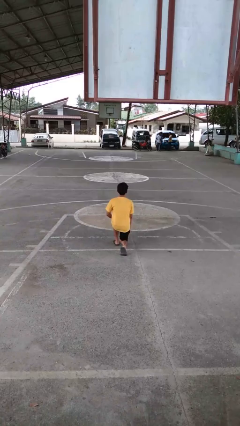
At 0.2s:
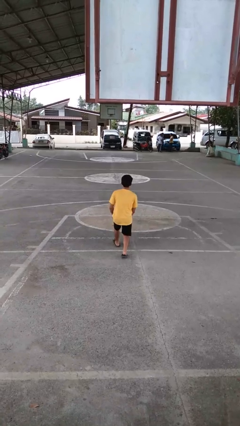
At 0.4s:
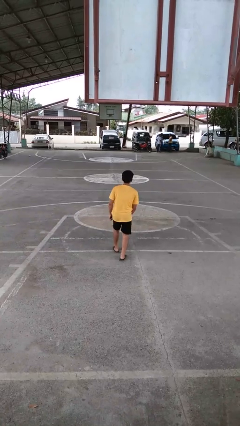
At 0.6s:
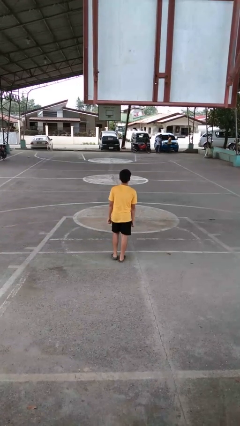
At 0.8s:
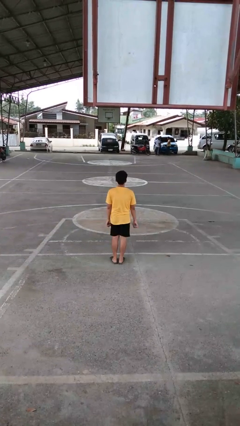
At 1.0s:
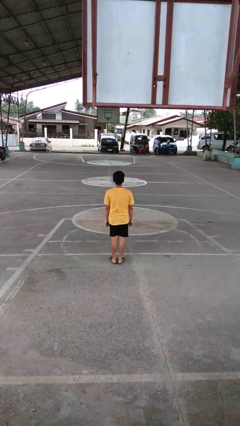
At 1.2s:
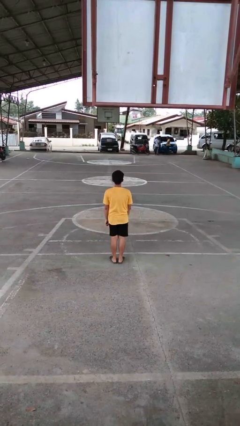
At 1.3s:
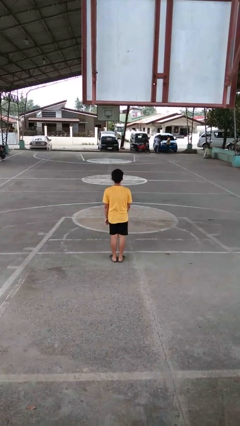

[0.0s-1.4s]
person stands up from floor

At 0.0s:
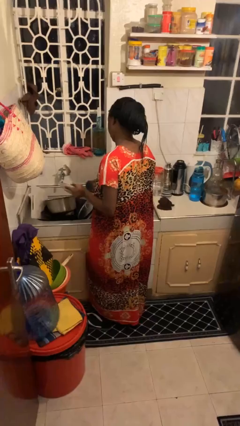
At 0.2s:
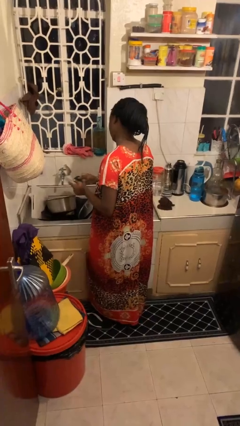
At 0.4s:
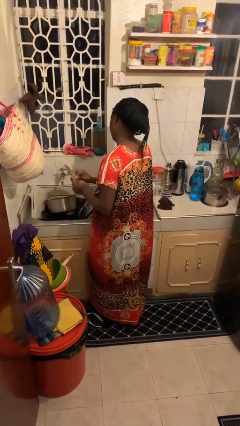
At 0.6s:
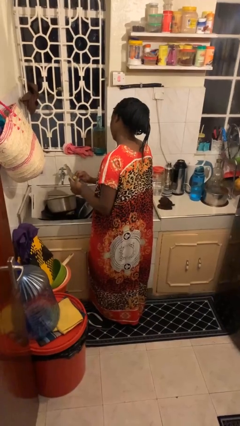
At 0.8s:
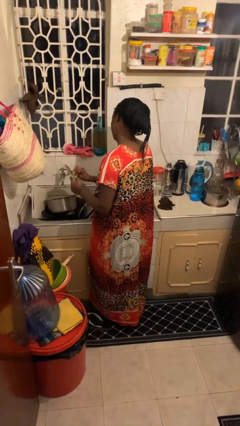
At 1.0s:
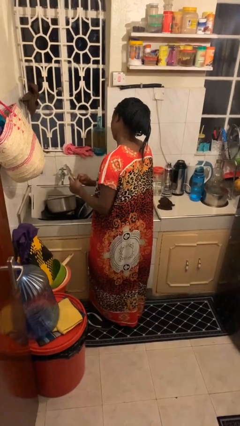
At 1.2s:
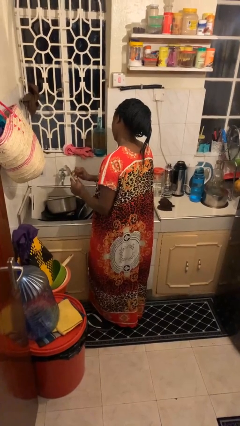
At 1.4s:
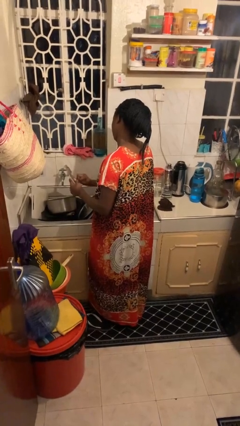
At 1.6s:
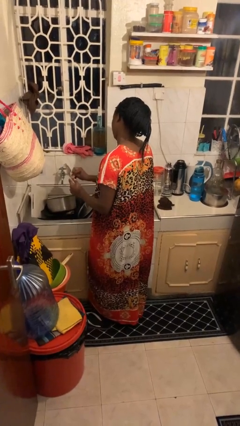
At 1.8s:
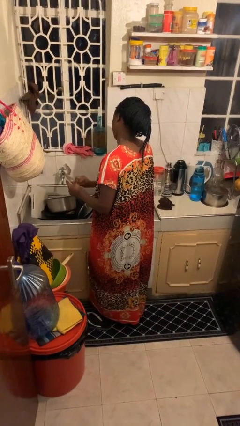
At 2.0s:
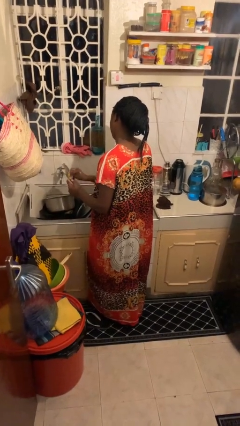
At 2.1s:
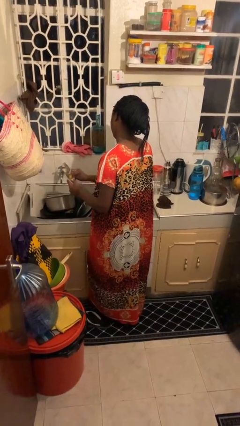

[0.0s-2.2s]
person washes dish

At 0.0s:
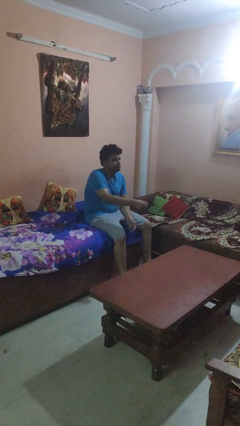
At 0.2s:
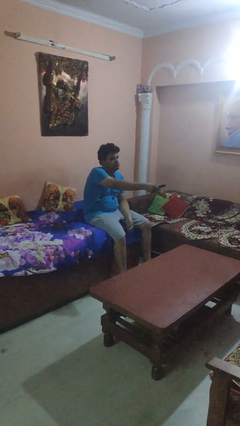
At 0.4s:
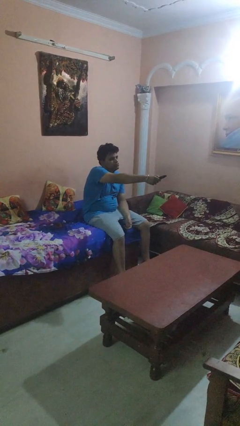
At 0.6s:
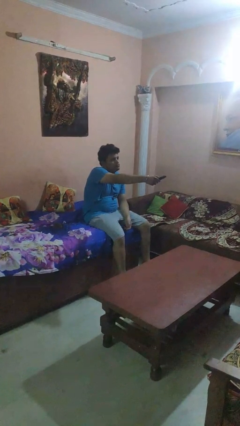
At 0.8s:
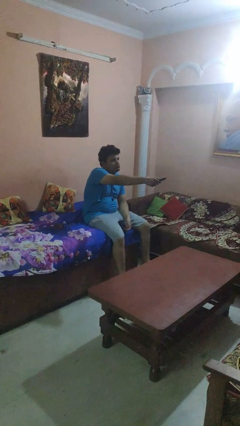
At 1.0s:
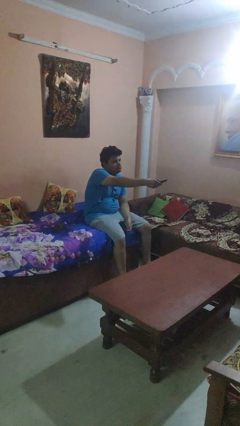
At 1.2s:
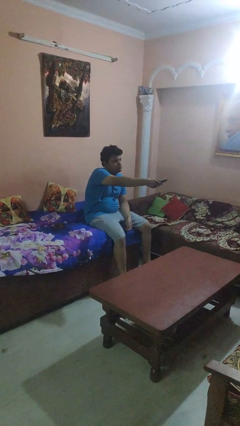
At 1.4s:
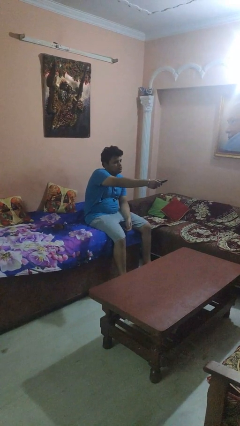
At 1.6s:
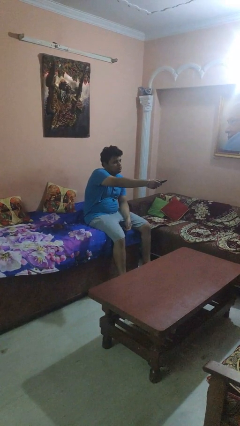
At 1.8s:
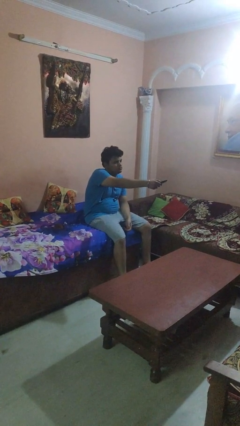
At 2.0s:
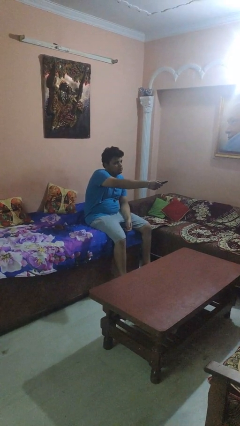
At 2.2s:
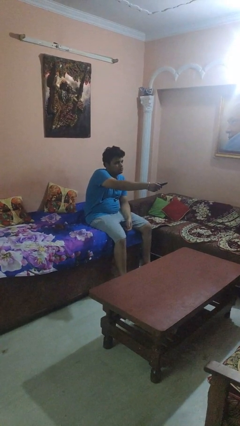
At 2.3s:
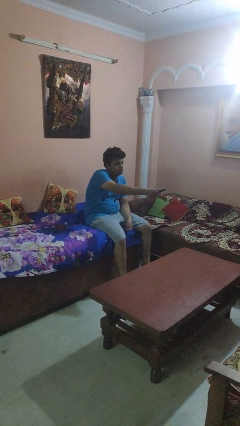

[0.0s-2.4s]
person uses television remote

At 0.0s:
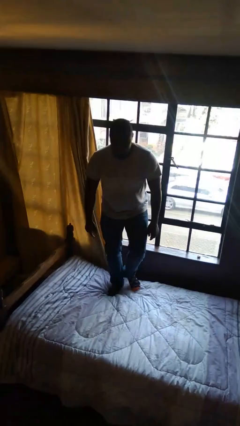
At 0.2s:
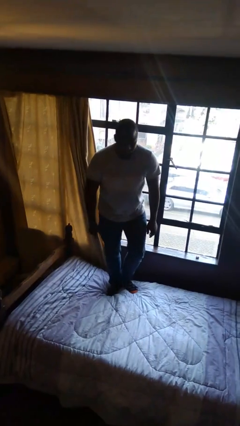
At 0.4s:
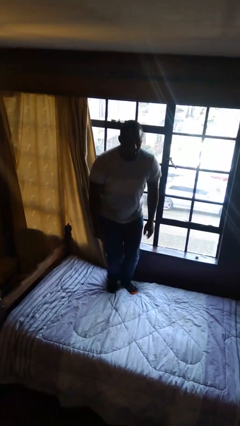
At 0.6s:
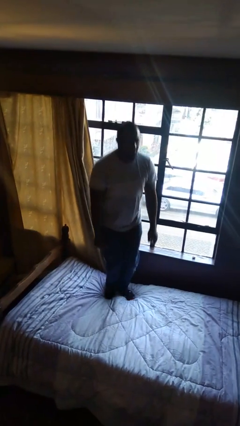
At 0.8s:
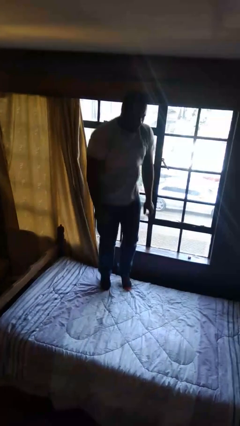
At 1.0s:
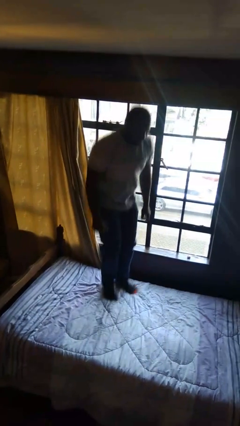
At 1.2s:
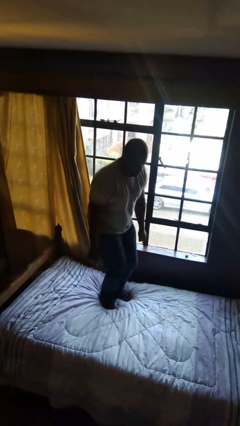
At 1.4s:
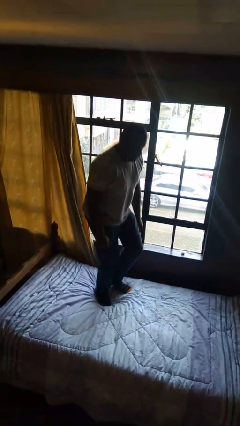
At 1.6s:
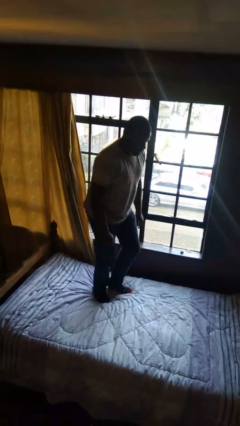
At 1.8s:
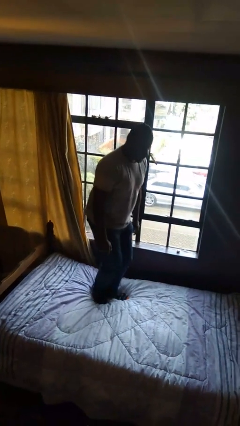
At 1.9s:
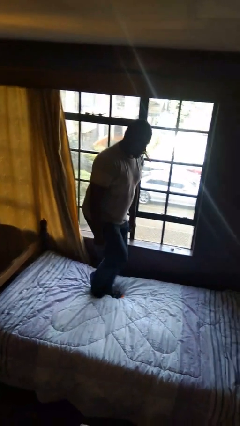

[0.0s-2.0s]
person jumps on bed

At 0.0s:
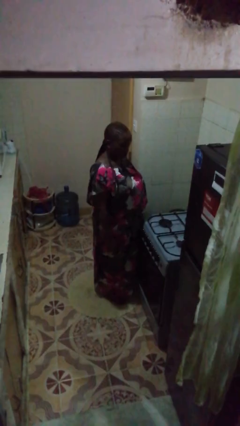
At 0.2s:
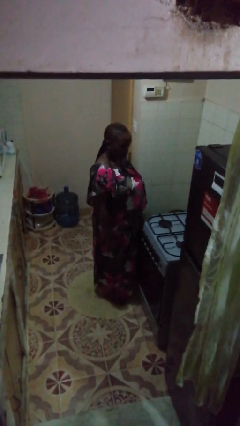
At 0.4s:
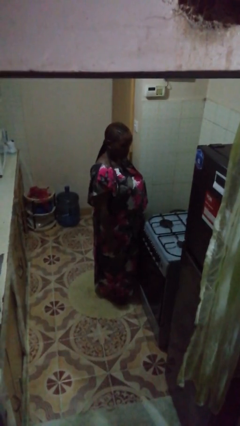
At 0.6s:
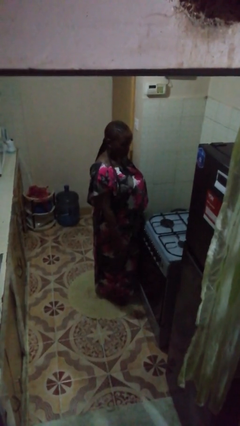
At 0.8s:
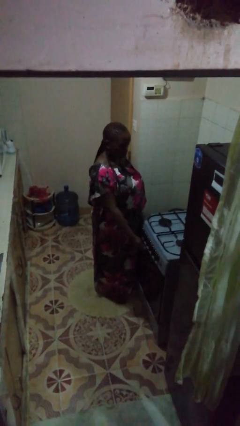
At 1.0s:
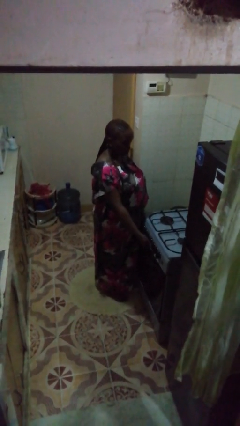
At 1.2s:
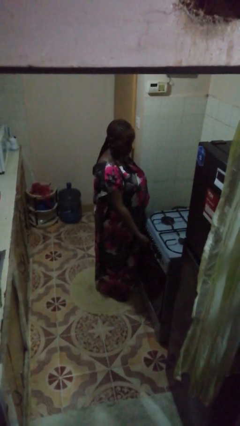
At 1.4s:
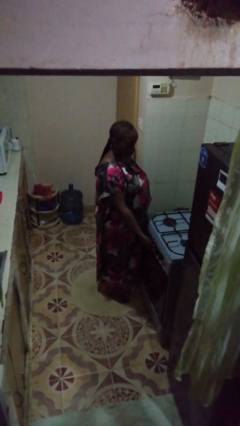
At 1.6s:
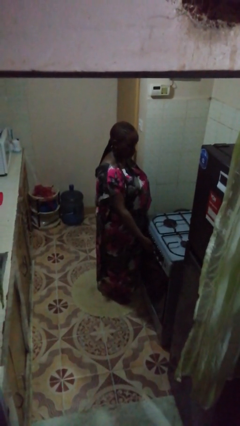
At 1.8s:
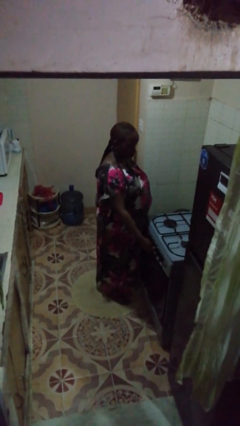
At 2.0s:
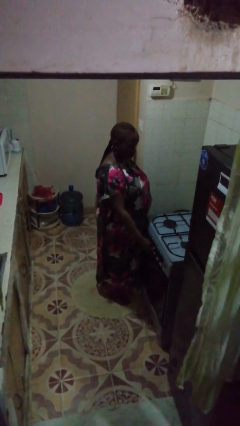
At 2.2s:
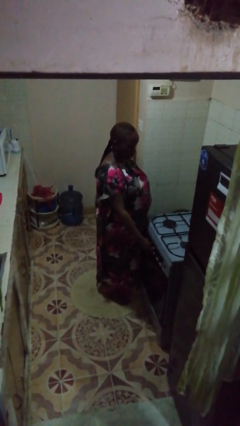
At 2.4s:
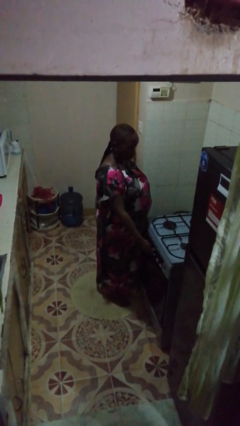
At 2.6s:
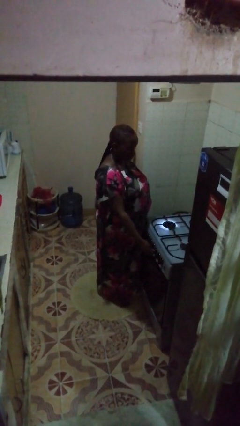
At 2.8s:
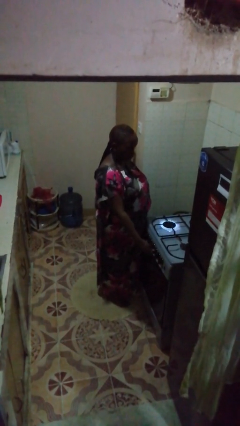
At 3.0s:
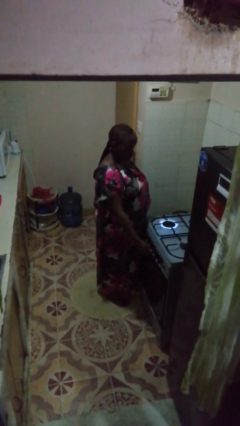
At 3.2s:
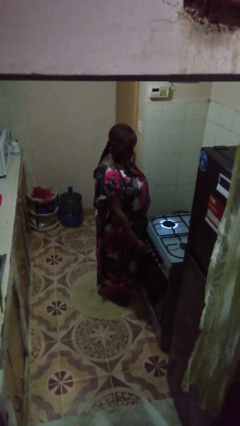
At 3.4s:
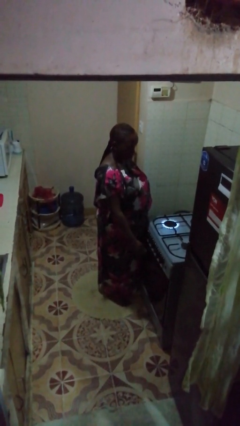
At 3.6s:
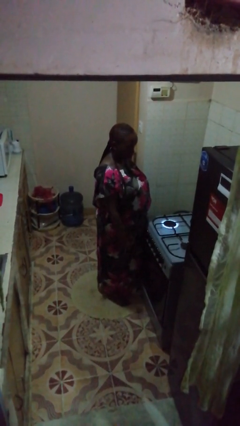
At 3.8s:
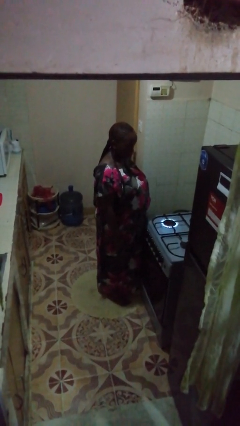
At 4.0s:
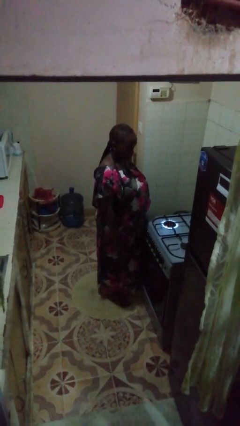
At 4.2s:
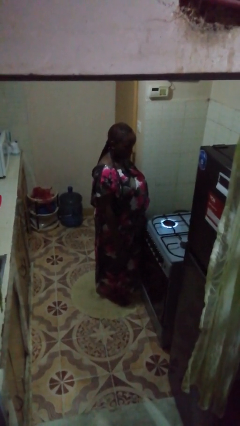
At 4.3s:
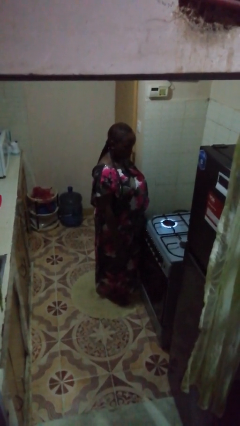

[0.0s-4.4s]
person turns on stovetop

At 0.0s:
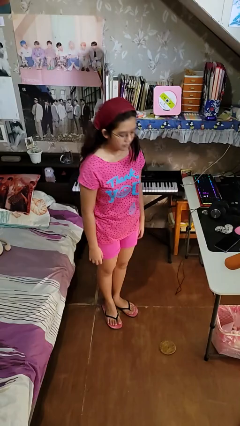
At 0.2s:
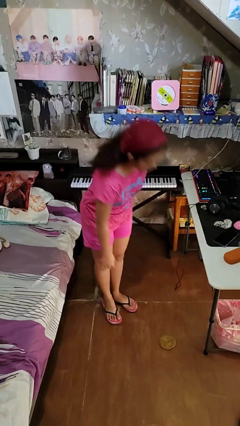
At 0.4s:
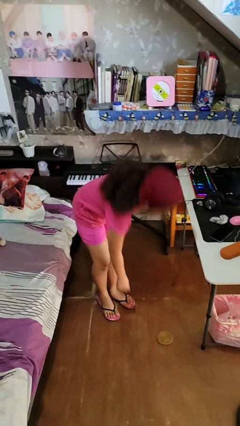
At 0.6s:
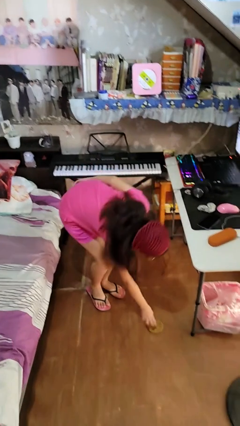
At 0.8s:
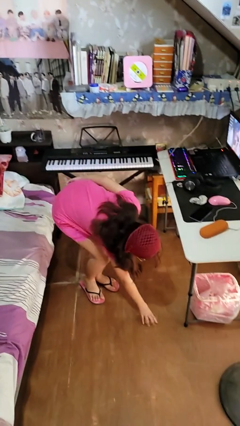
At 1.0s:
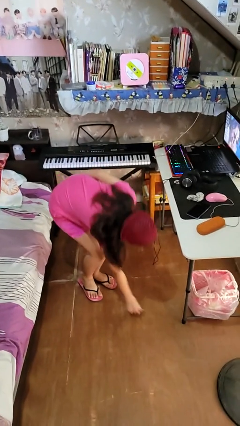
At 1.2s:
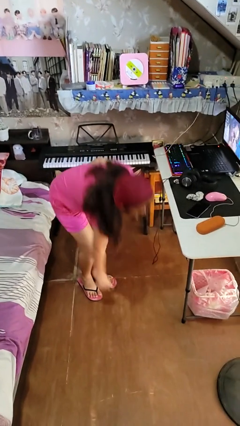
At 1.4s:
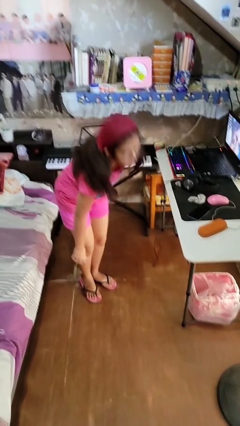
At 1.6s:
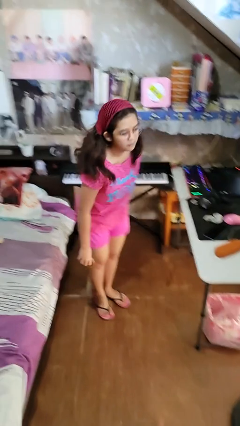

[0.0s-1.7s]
person picks up object from floor

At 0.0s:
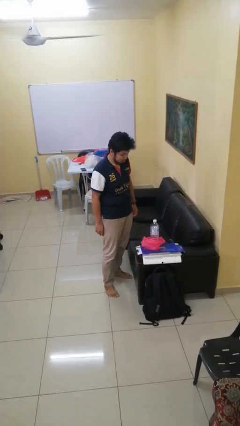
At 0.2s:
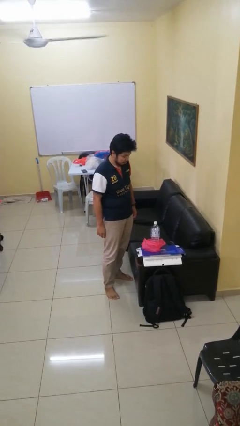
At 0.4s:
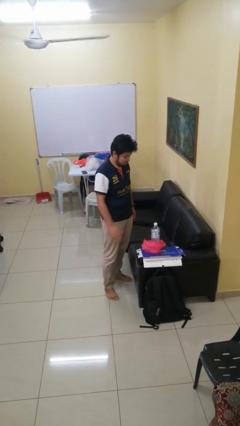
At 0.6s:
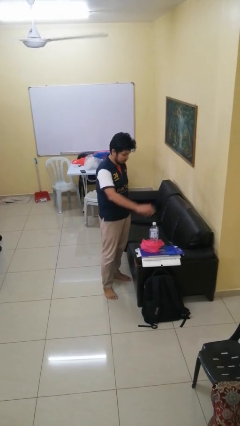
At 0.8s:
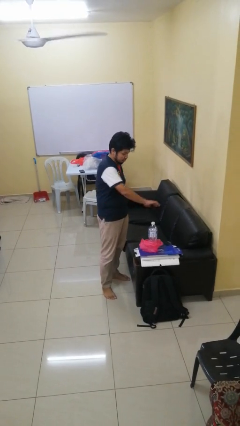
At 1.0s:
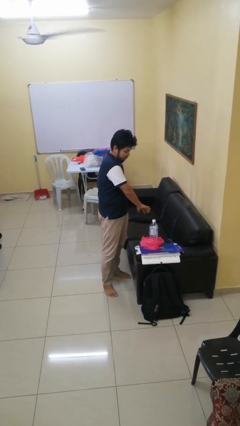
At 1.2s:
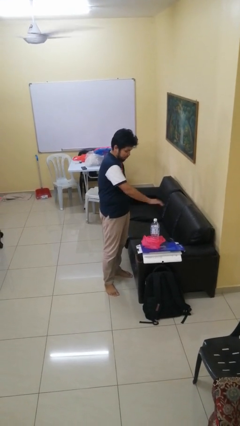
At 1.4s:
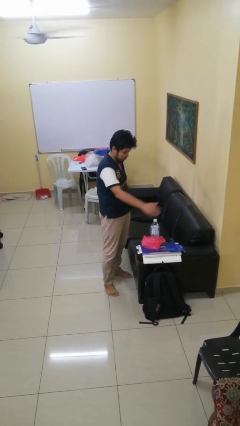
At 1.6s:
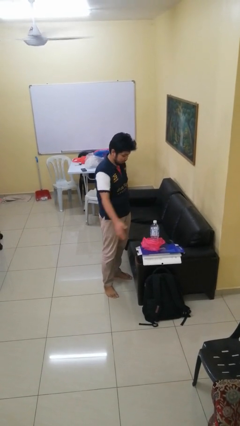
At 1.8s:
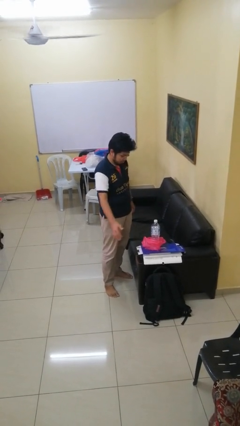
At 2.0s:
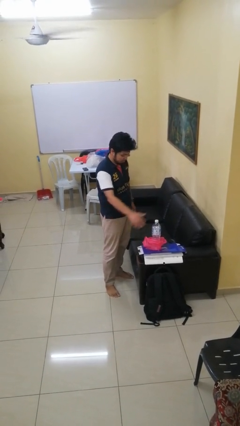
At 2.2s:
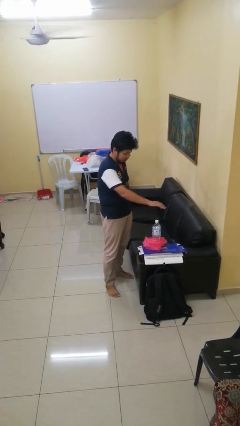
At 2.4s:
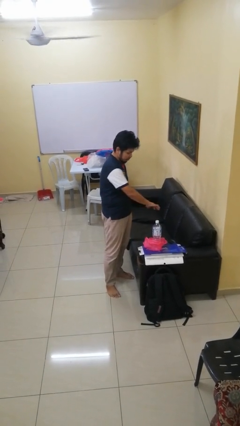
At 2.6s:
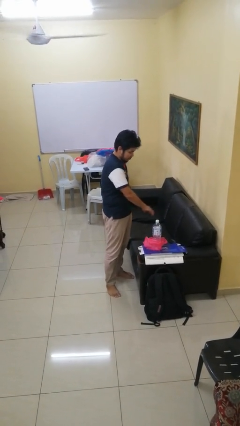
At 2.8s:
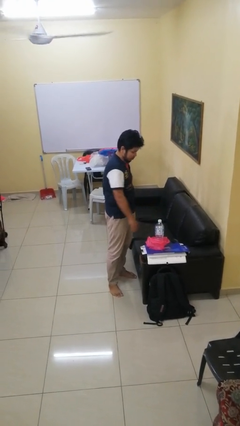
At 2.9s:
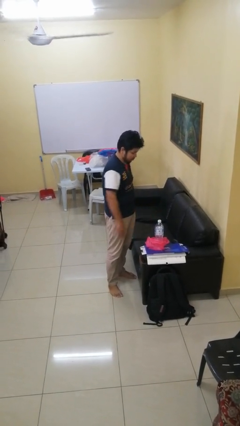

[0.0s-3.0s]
person waves hand over object
